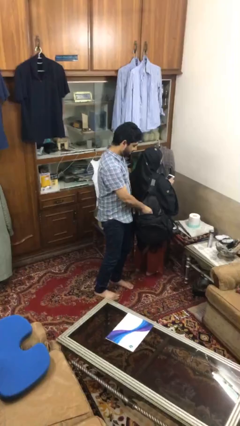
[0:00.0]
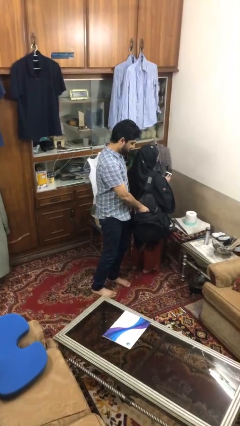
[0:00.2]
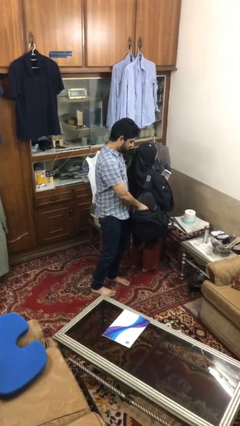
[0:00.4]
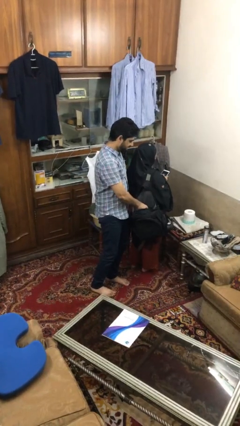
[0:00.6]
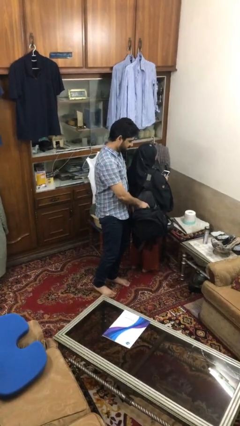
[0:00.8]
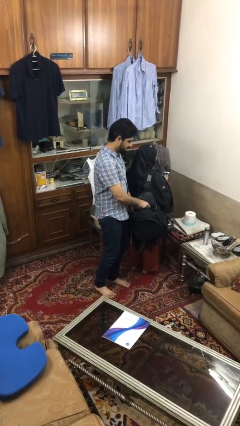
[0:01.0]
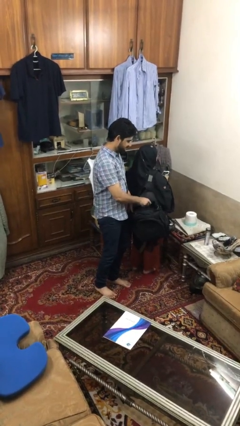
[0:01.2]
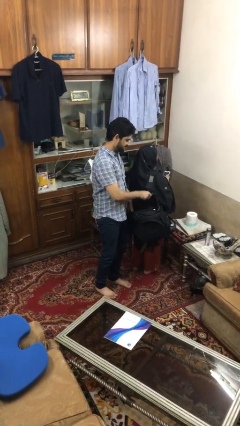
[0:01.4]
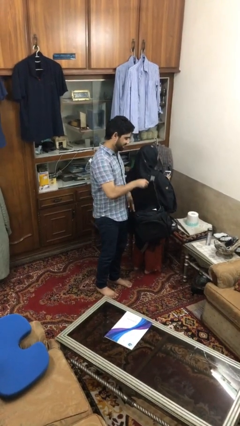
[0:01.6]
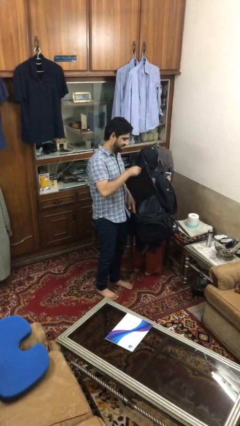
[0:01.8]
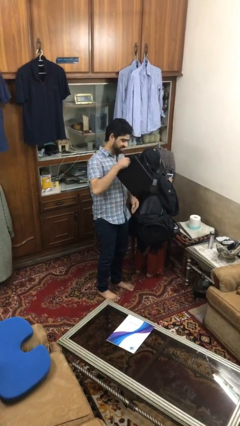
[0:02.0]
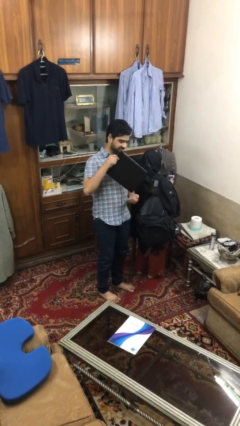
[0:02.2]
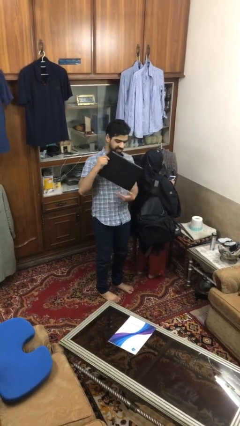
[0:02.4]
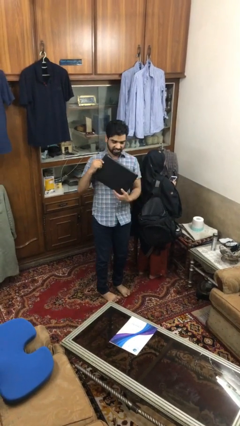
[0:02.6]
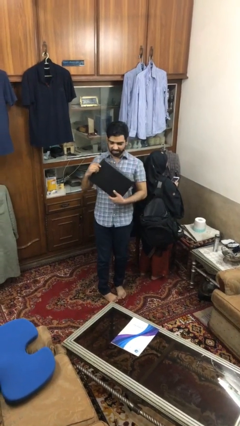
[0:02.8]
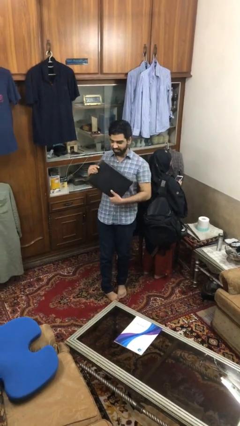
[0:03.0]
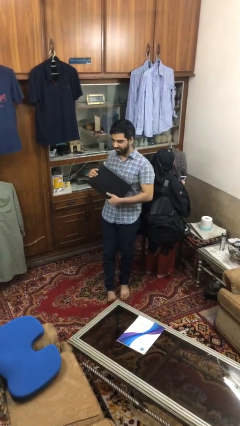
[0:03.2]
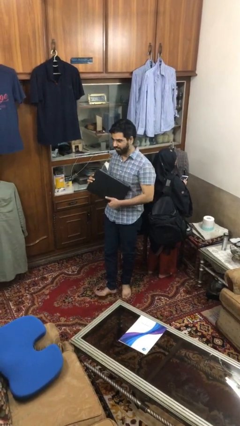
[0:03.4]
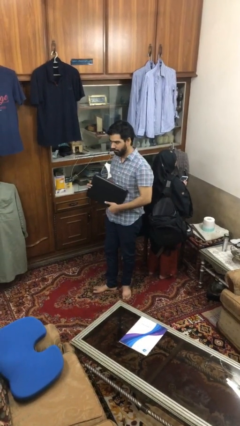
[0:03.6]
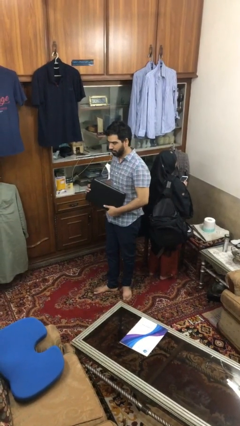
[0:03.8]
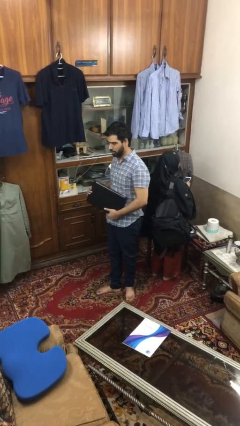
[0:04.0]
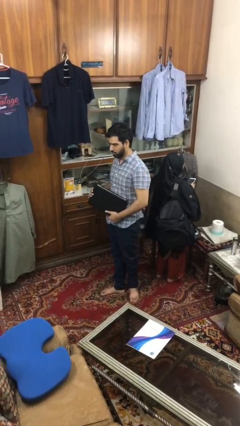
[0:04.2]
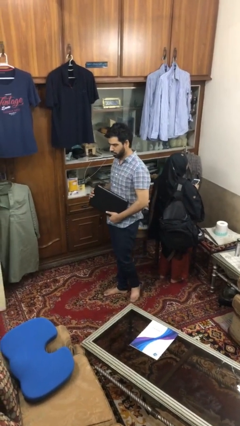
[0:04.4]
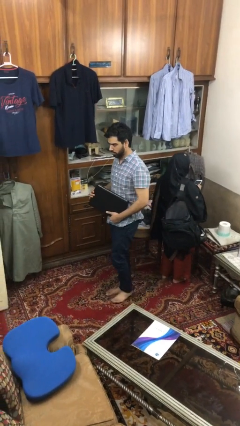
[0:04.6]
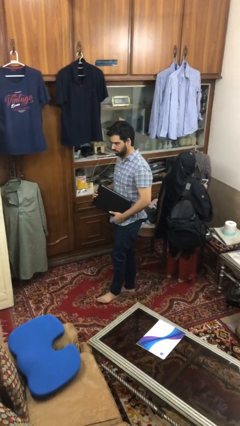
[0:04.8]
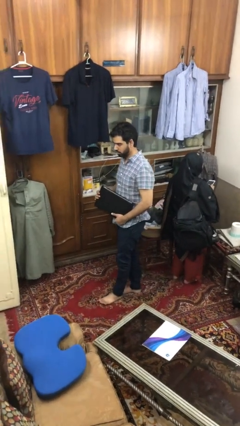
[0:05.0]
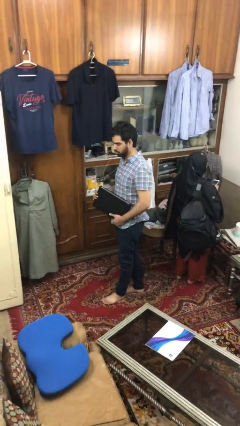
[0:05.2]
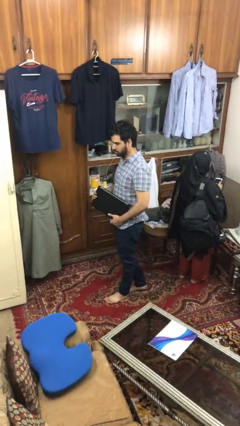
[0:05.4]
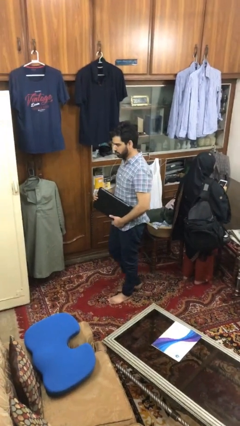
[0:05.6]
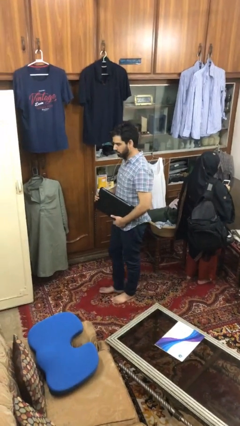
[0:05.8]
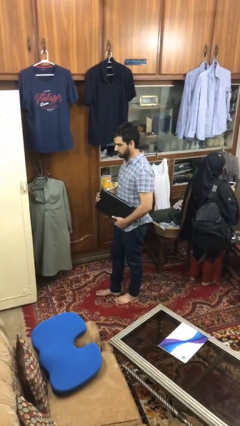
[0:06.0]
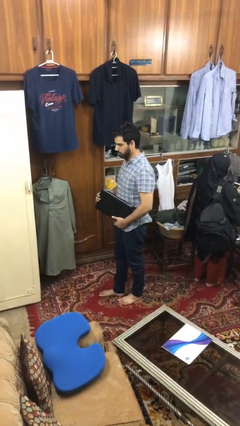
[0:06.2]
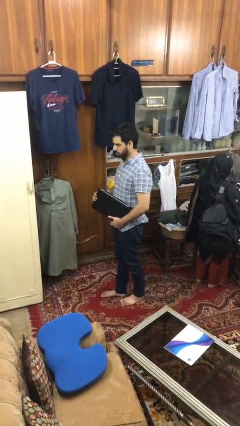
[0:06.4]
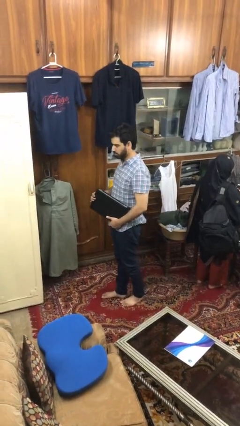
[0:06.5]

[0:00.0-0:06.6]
person steals object from person

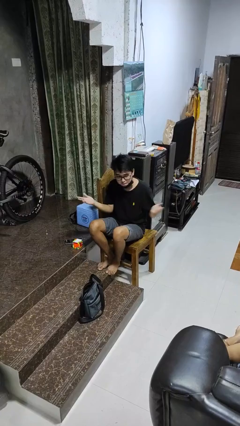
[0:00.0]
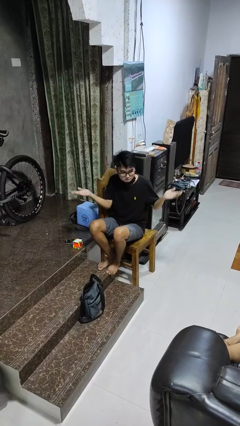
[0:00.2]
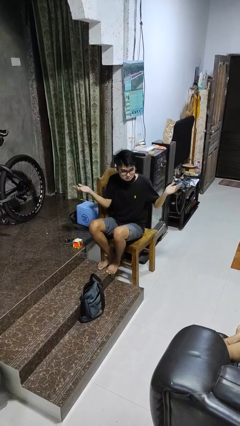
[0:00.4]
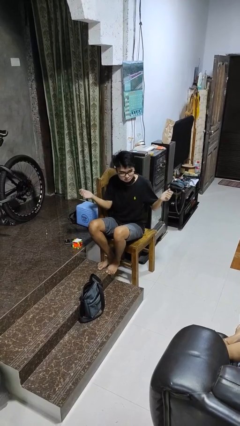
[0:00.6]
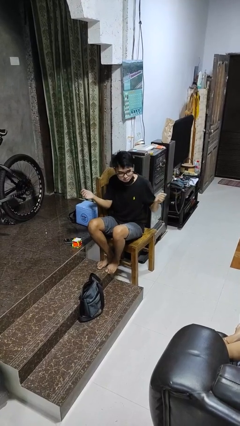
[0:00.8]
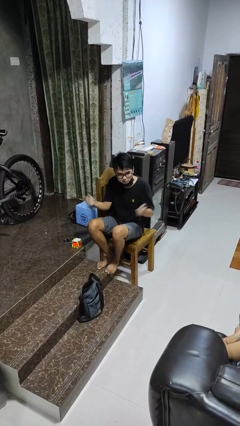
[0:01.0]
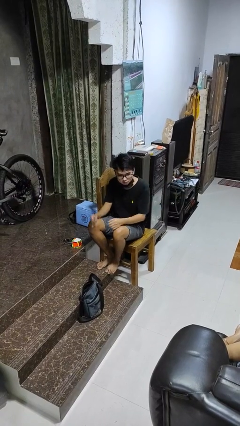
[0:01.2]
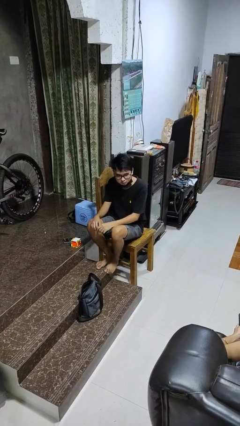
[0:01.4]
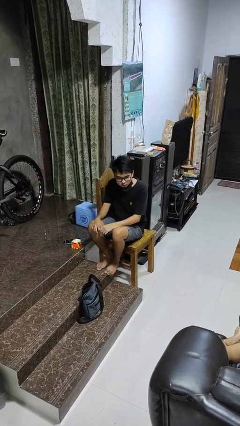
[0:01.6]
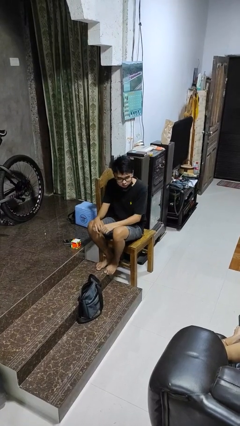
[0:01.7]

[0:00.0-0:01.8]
person shrugs

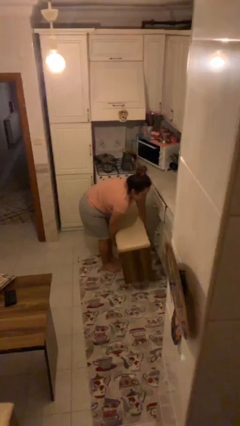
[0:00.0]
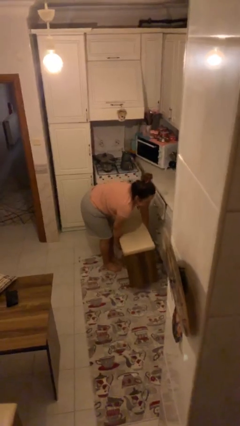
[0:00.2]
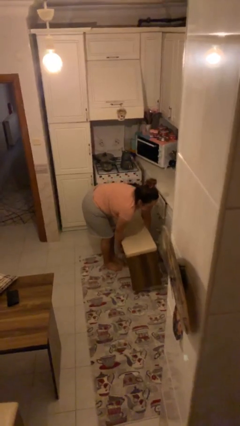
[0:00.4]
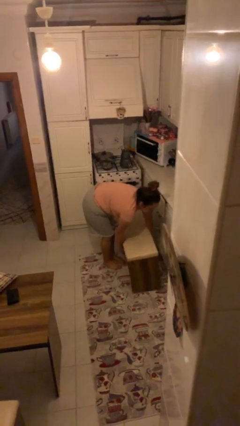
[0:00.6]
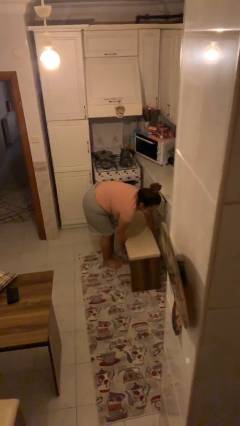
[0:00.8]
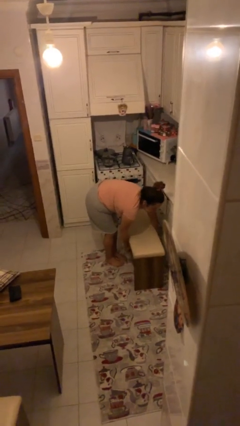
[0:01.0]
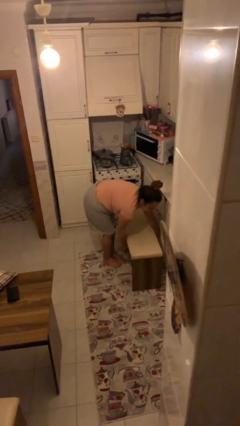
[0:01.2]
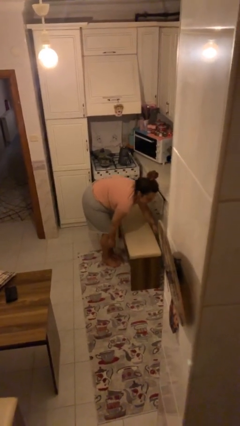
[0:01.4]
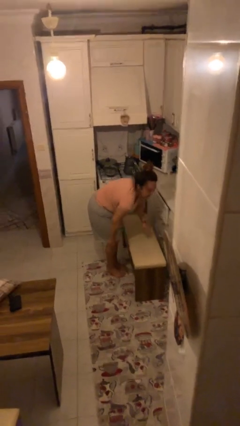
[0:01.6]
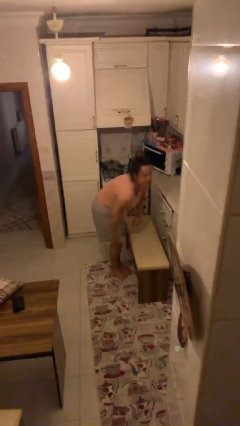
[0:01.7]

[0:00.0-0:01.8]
person puts down object on floor

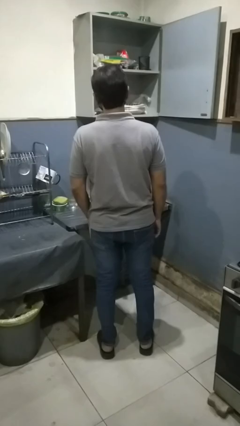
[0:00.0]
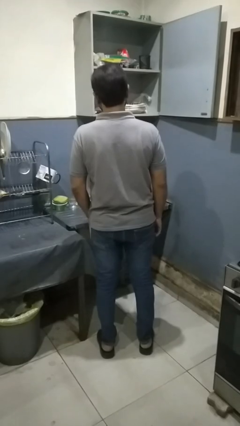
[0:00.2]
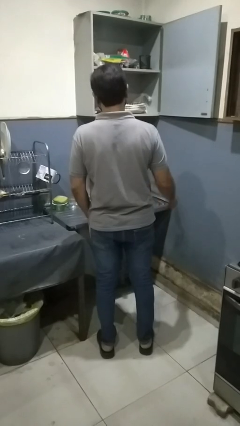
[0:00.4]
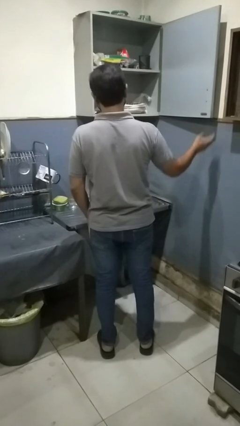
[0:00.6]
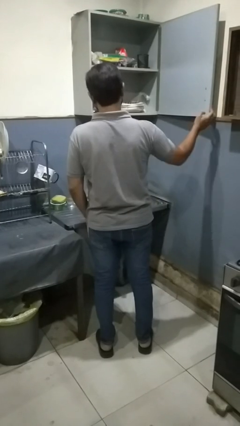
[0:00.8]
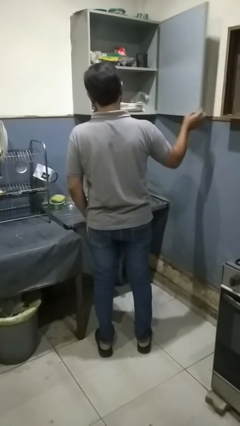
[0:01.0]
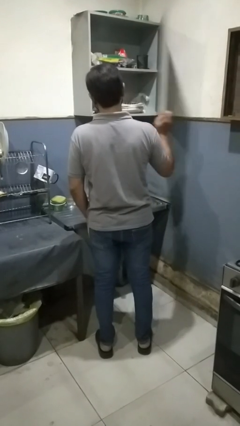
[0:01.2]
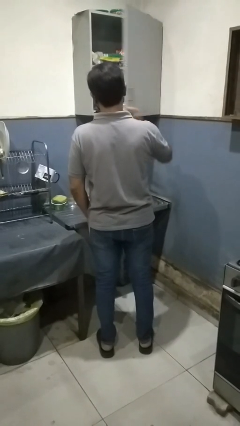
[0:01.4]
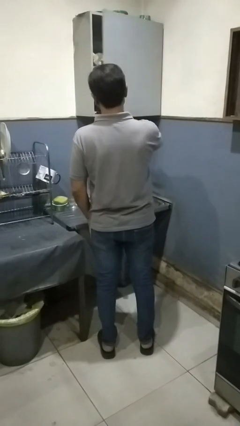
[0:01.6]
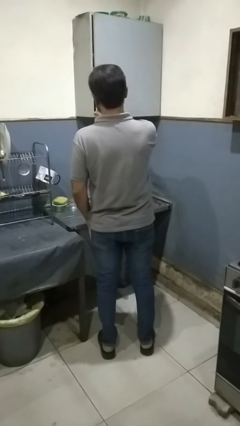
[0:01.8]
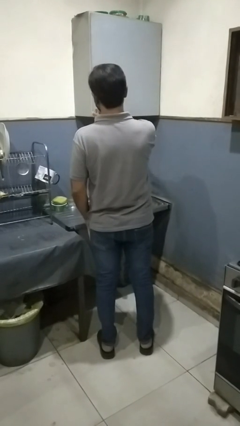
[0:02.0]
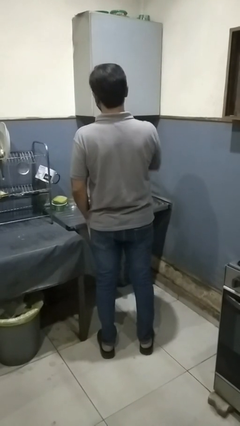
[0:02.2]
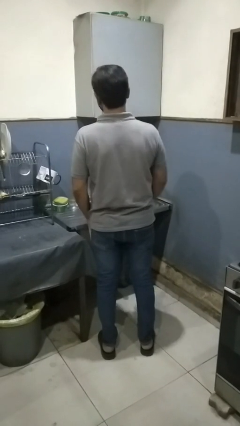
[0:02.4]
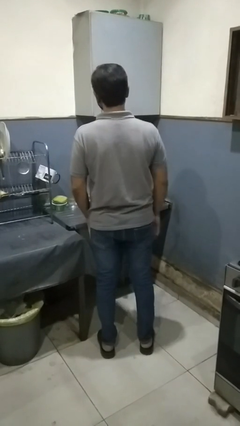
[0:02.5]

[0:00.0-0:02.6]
person closes kitchen drawer

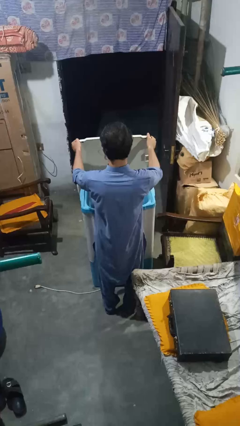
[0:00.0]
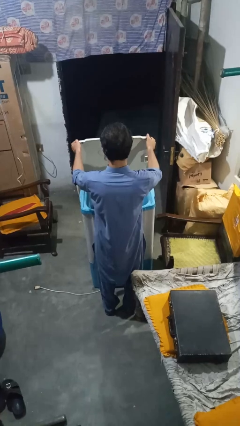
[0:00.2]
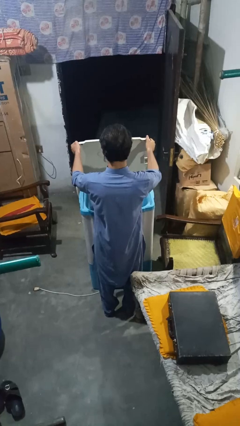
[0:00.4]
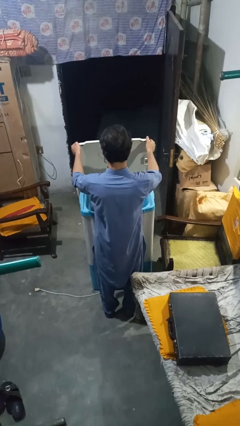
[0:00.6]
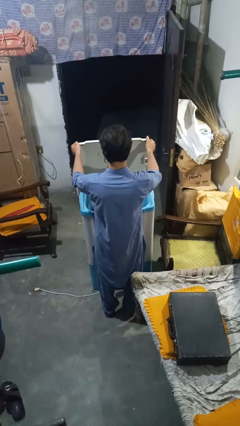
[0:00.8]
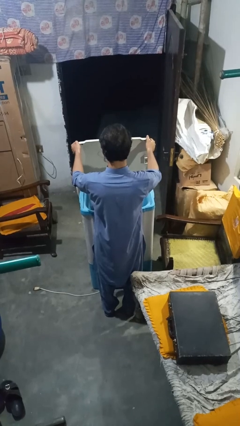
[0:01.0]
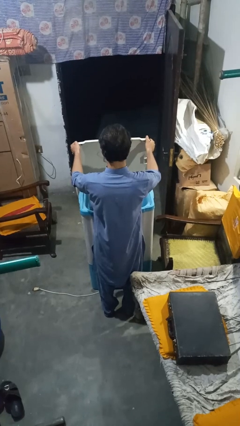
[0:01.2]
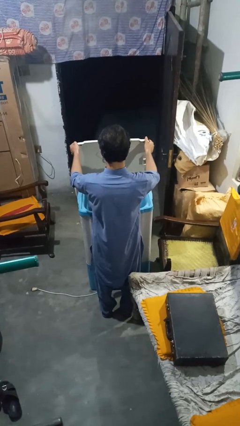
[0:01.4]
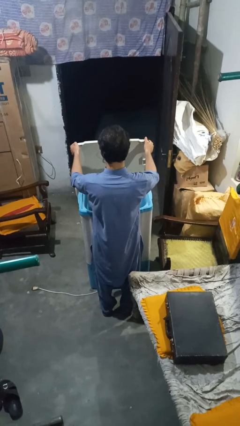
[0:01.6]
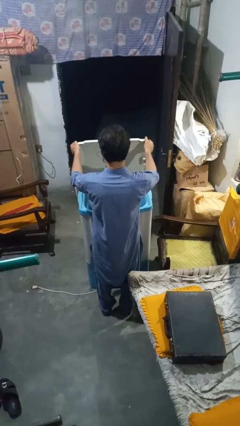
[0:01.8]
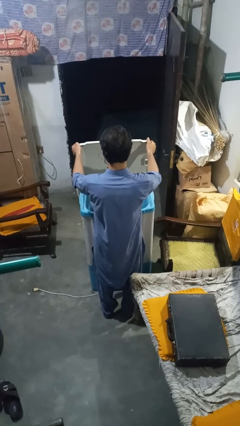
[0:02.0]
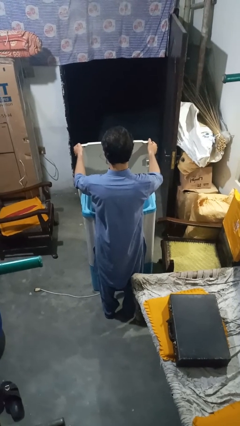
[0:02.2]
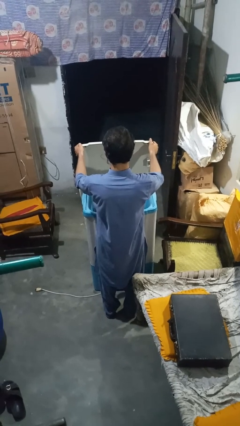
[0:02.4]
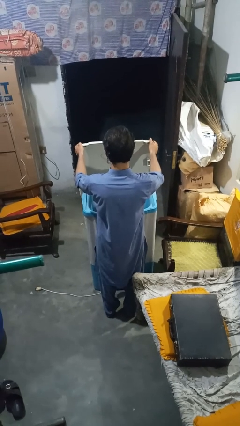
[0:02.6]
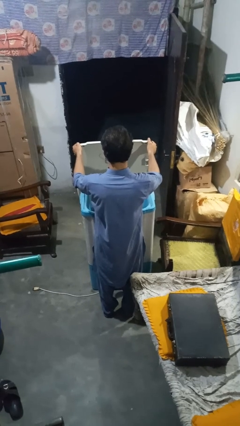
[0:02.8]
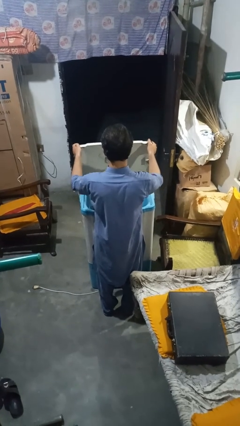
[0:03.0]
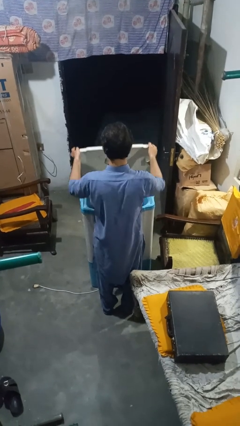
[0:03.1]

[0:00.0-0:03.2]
person opens clothes washer

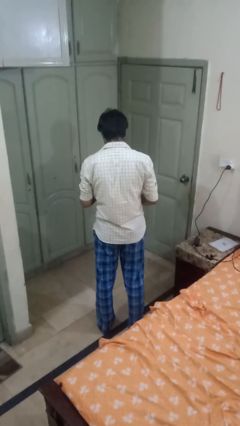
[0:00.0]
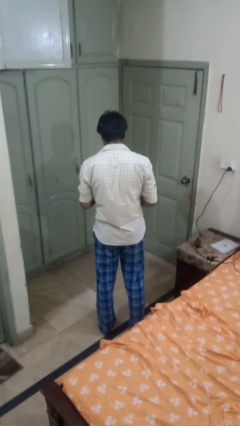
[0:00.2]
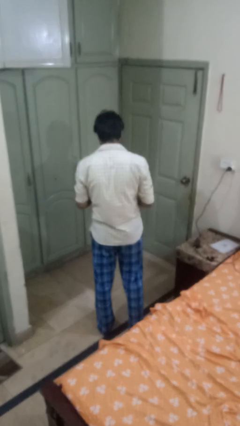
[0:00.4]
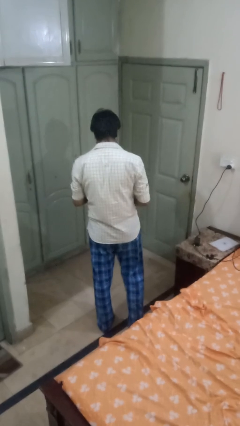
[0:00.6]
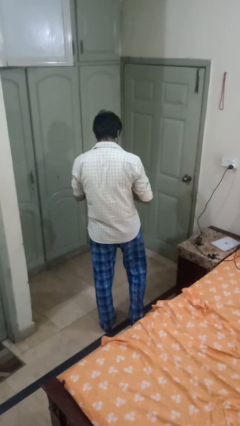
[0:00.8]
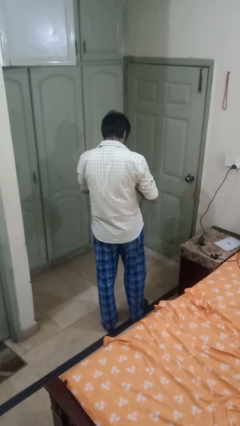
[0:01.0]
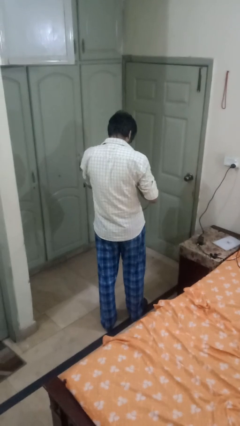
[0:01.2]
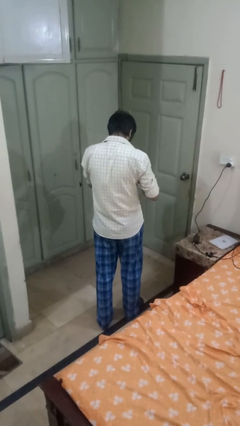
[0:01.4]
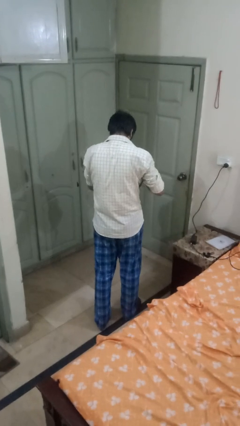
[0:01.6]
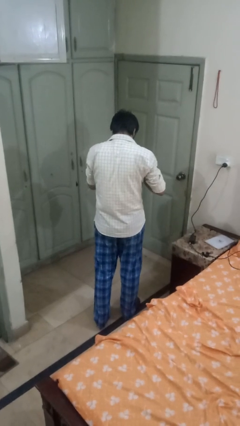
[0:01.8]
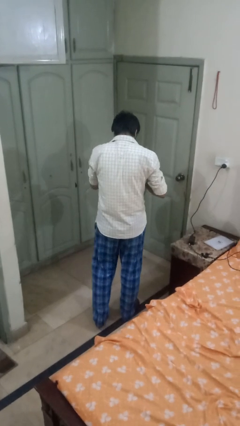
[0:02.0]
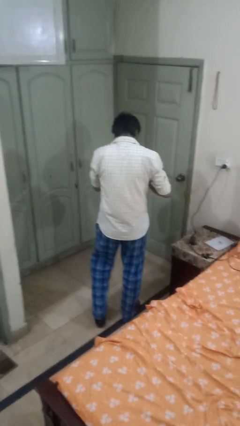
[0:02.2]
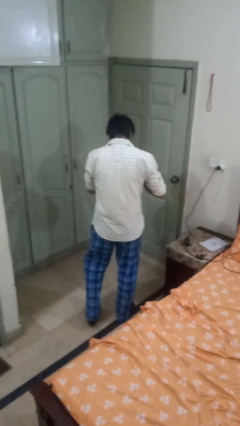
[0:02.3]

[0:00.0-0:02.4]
person searches in purse
